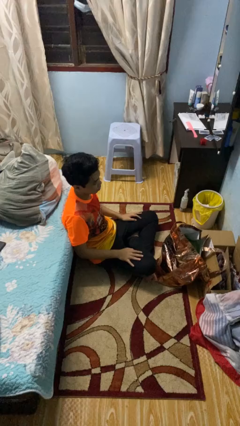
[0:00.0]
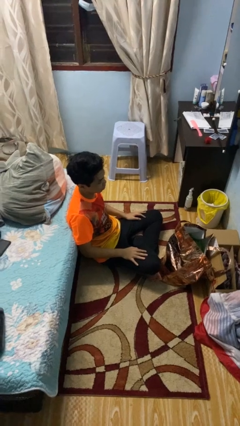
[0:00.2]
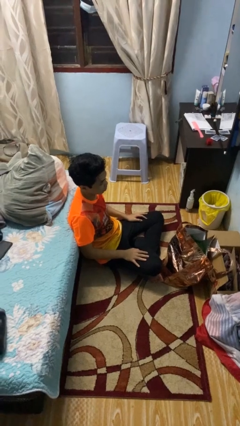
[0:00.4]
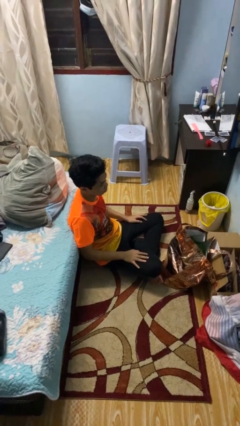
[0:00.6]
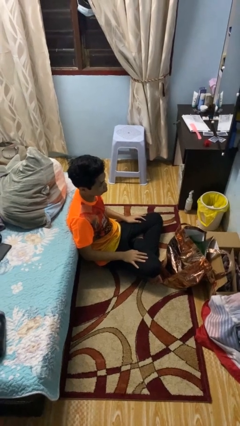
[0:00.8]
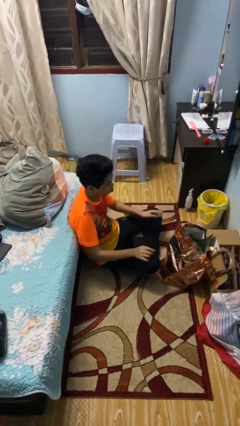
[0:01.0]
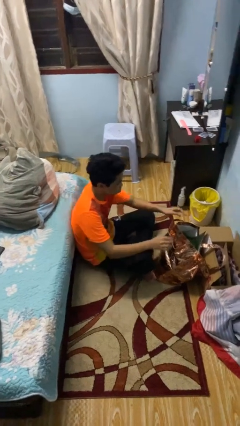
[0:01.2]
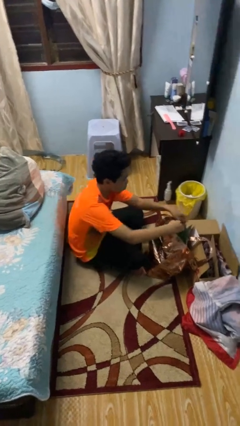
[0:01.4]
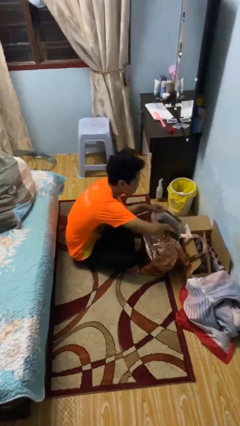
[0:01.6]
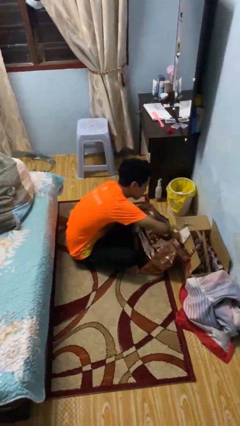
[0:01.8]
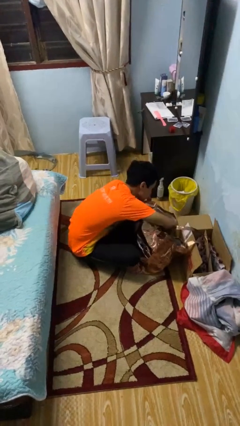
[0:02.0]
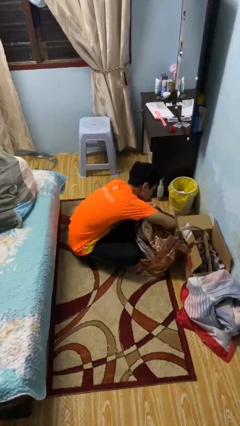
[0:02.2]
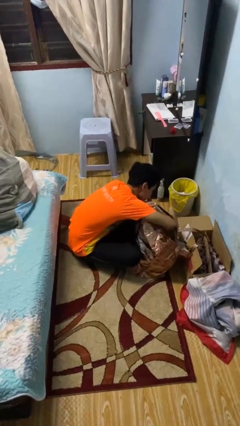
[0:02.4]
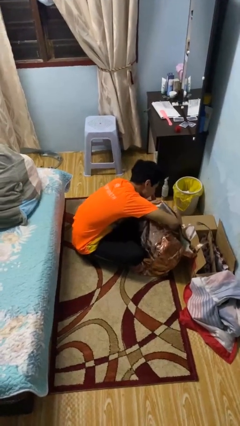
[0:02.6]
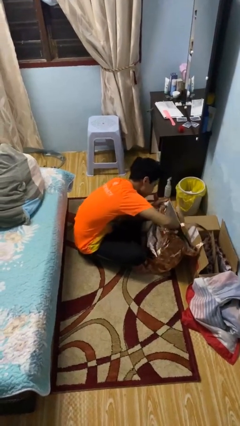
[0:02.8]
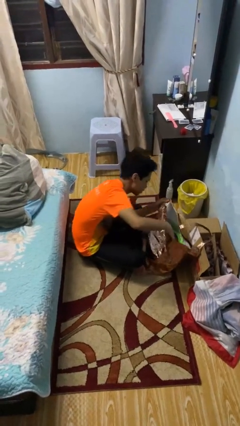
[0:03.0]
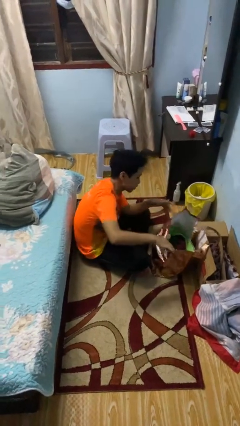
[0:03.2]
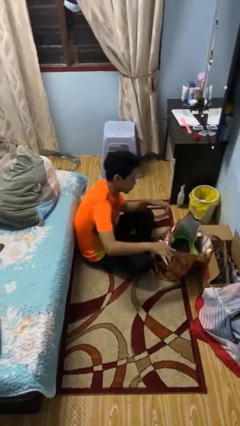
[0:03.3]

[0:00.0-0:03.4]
person searches in bag

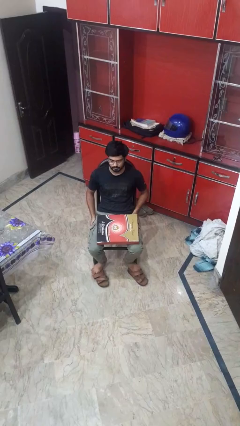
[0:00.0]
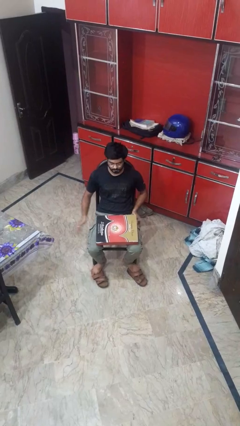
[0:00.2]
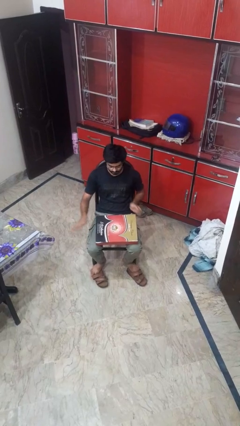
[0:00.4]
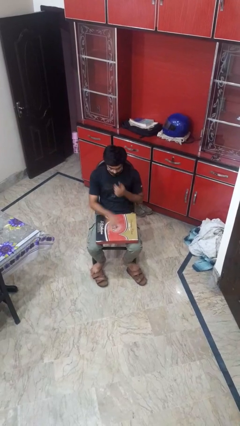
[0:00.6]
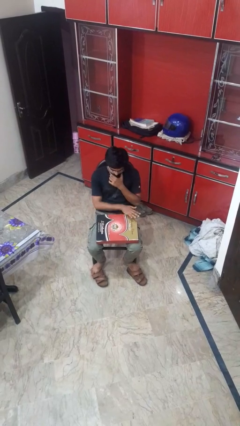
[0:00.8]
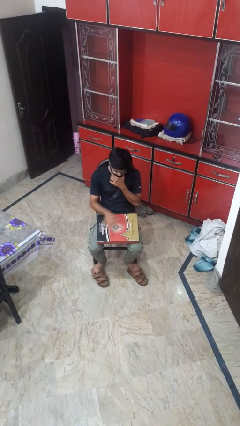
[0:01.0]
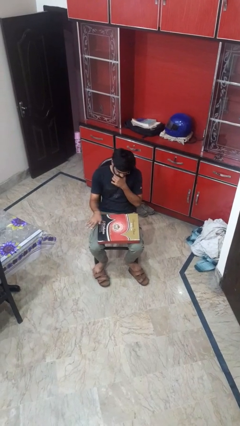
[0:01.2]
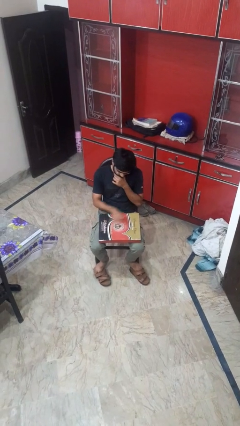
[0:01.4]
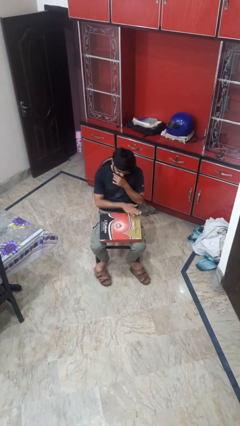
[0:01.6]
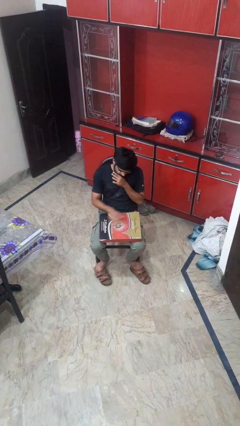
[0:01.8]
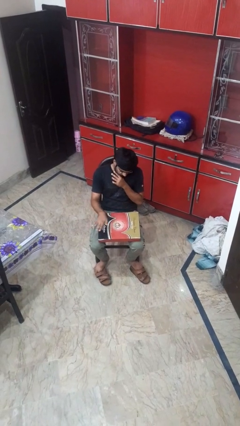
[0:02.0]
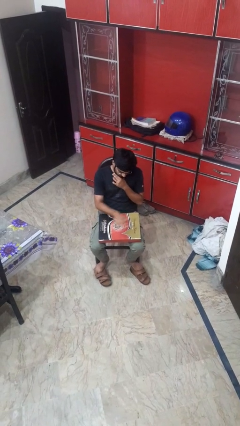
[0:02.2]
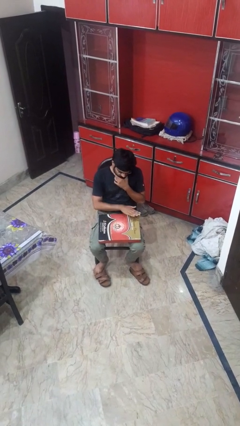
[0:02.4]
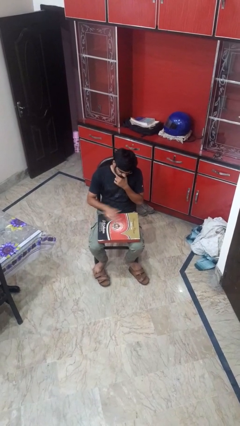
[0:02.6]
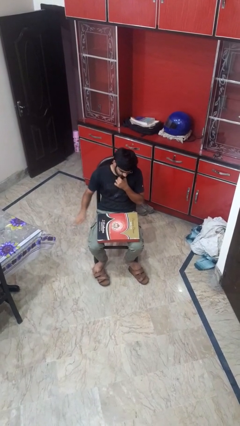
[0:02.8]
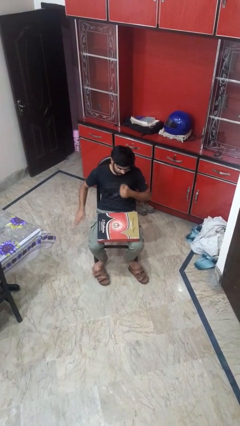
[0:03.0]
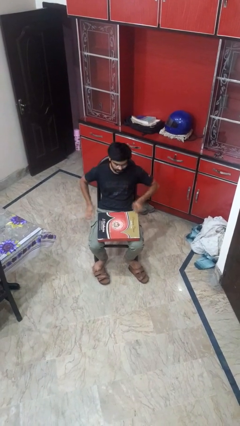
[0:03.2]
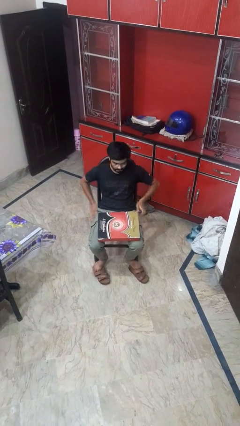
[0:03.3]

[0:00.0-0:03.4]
person waves hand over object

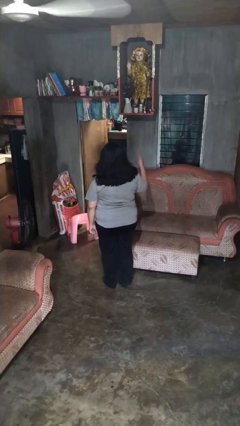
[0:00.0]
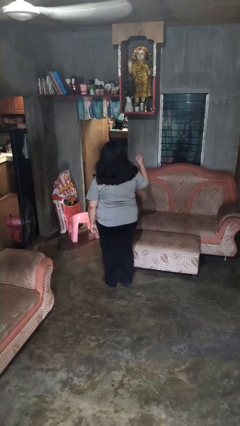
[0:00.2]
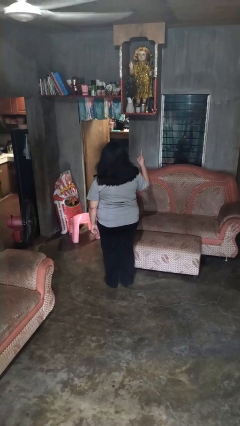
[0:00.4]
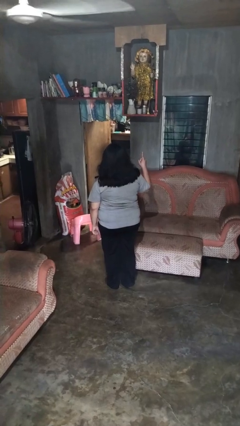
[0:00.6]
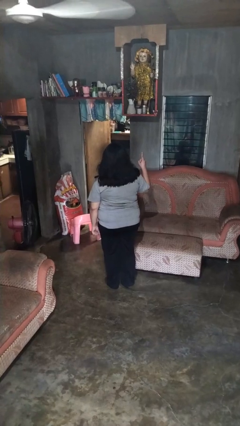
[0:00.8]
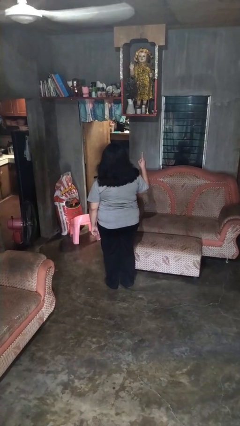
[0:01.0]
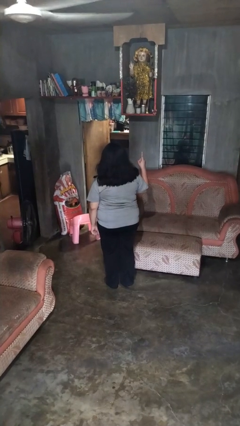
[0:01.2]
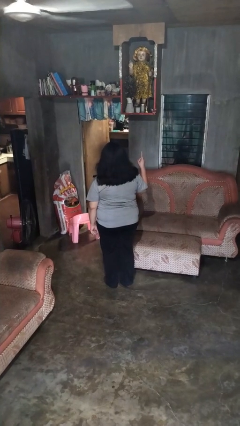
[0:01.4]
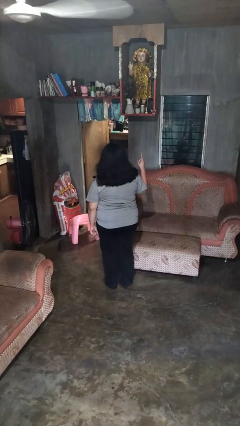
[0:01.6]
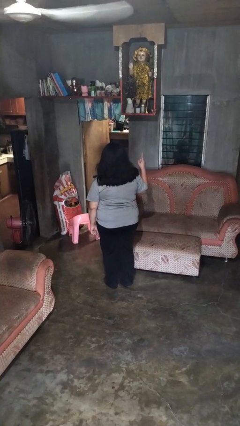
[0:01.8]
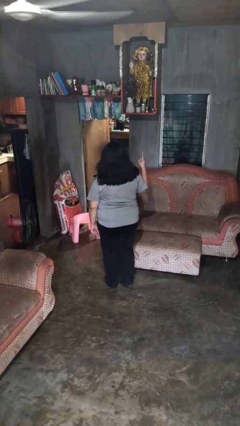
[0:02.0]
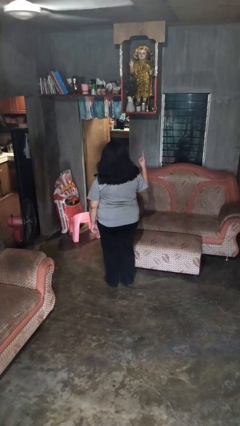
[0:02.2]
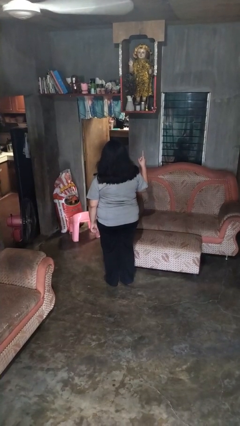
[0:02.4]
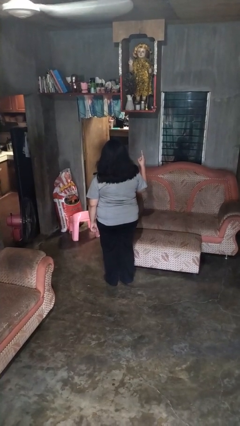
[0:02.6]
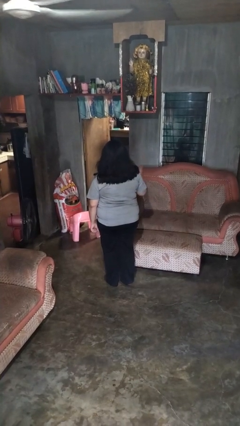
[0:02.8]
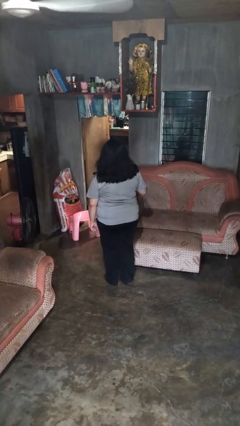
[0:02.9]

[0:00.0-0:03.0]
person gestures number one

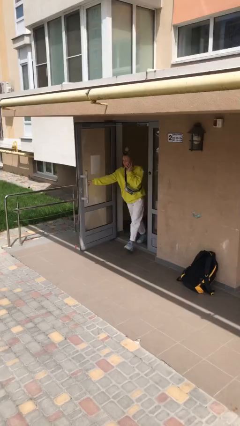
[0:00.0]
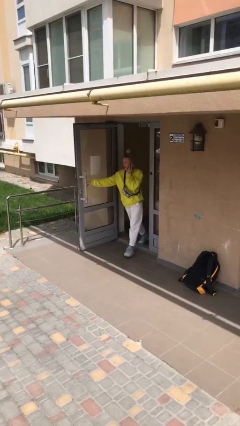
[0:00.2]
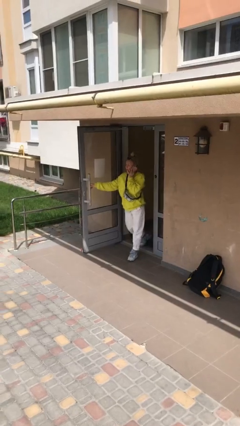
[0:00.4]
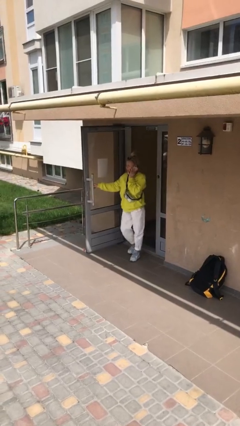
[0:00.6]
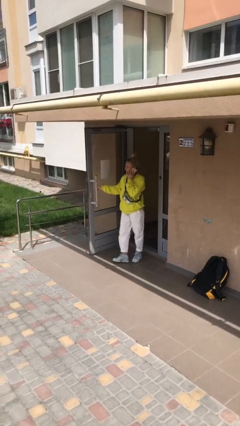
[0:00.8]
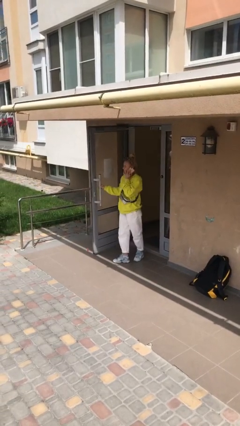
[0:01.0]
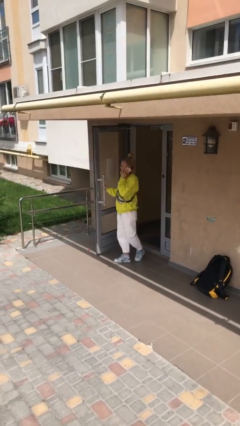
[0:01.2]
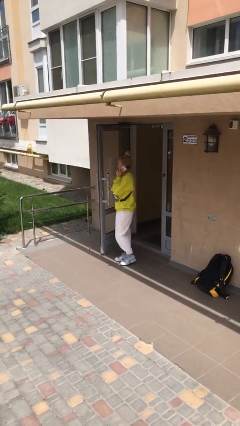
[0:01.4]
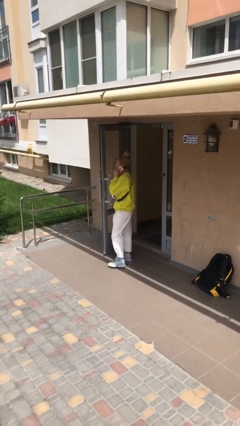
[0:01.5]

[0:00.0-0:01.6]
person enters scene through structure

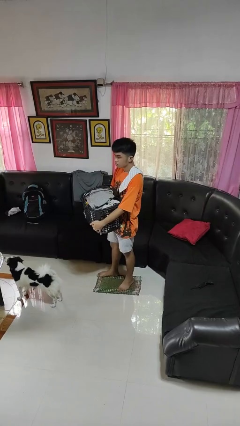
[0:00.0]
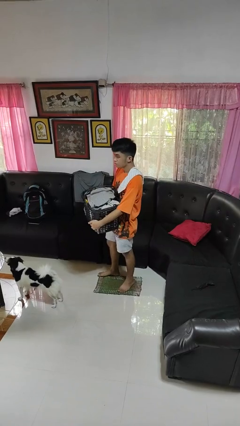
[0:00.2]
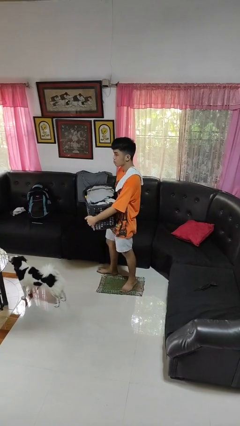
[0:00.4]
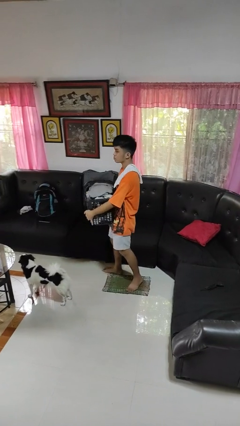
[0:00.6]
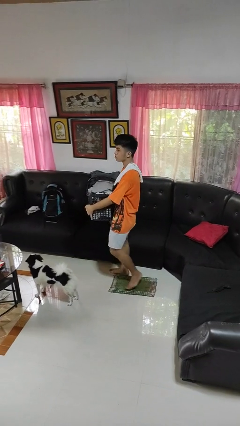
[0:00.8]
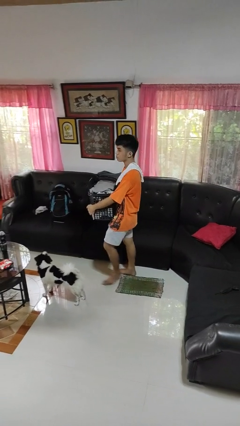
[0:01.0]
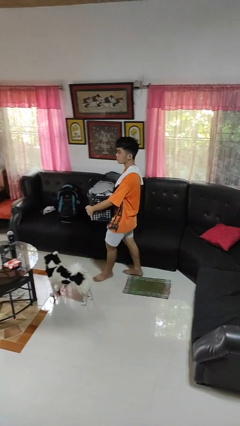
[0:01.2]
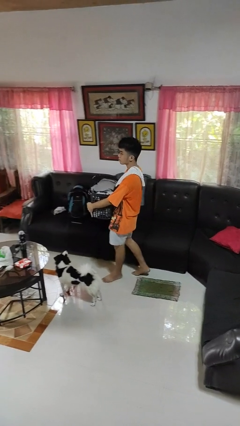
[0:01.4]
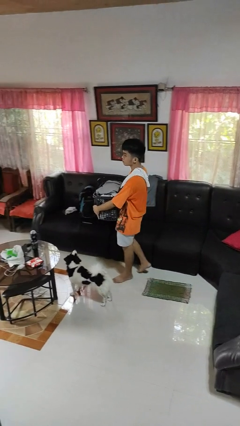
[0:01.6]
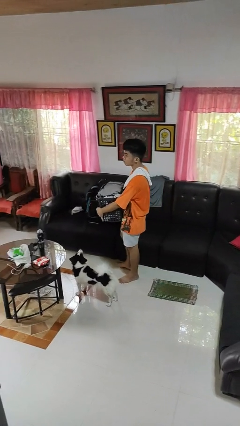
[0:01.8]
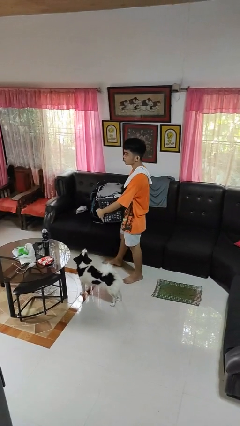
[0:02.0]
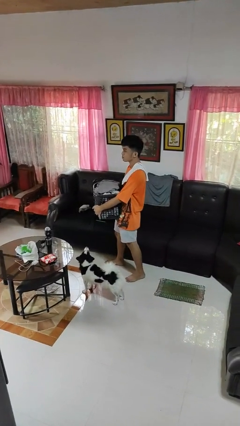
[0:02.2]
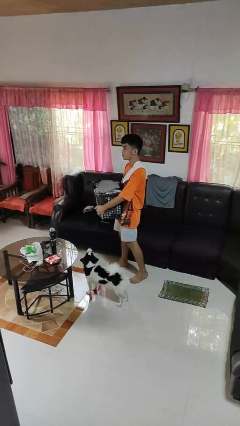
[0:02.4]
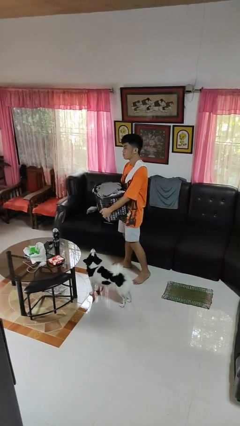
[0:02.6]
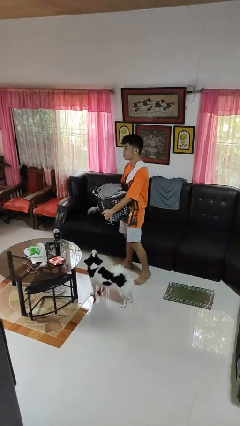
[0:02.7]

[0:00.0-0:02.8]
person carries laundry basket

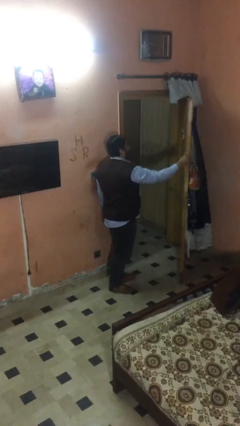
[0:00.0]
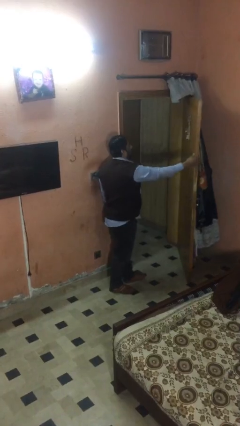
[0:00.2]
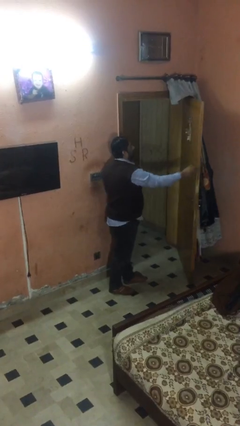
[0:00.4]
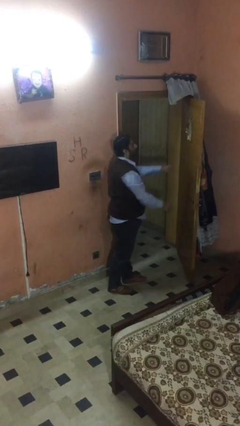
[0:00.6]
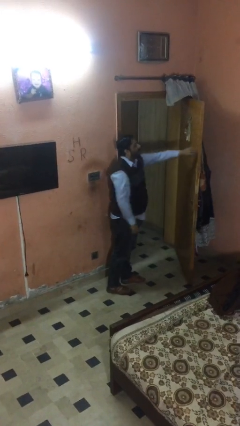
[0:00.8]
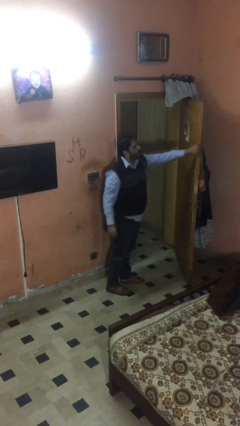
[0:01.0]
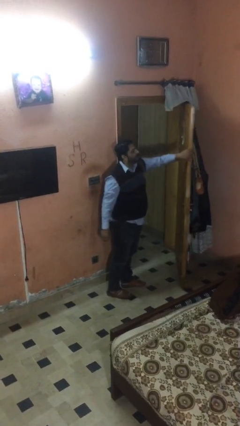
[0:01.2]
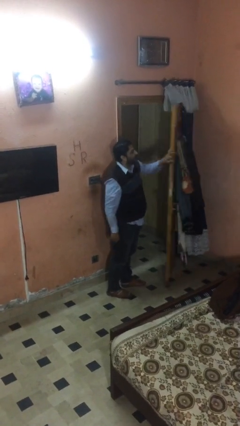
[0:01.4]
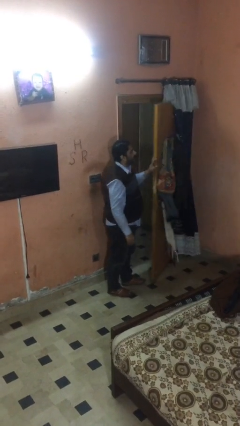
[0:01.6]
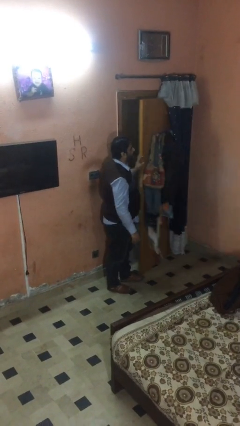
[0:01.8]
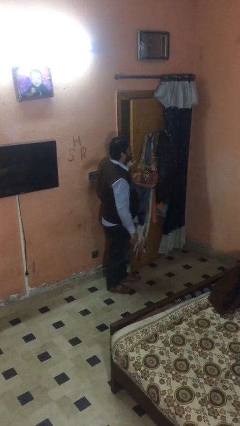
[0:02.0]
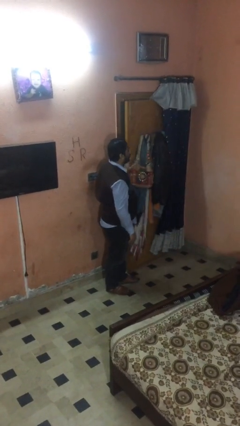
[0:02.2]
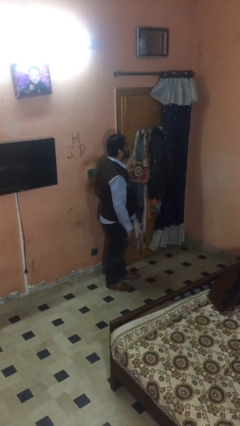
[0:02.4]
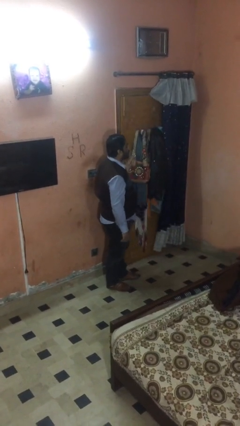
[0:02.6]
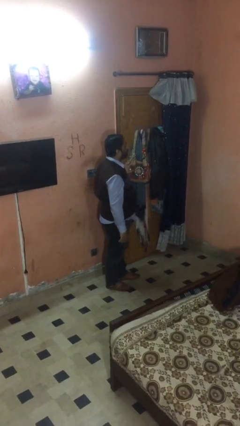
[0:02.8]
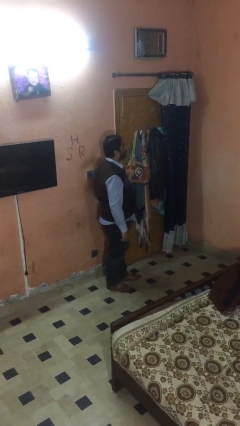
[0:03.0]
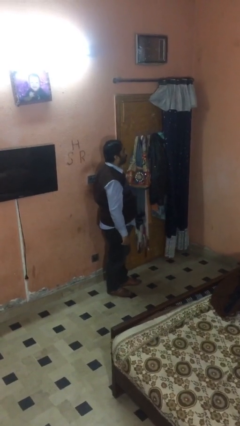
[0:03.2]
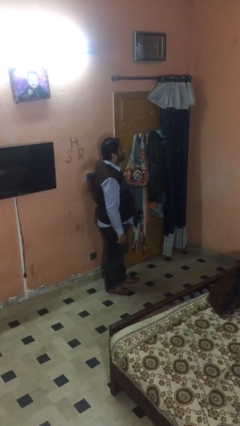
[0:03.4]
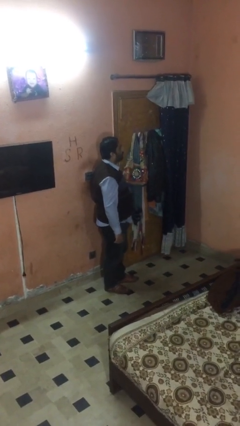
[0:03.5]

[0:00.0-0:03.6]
person closes facility door
